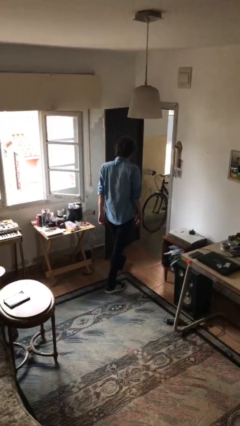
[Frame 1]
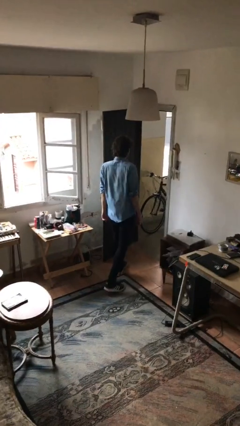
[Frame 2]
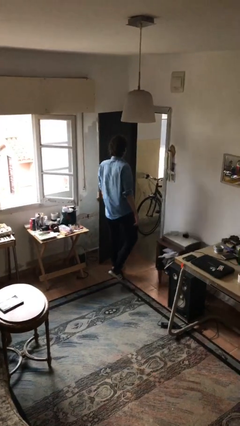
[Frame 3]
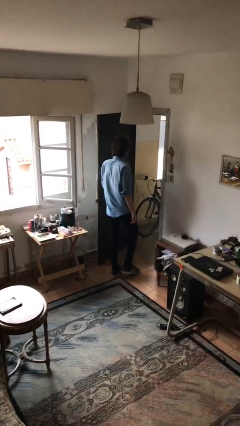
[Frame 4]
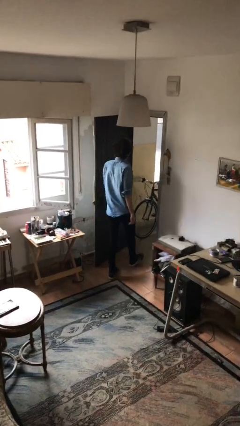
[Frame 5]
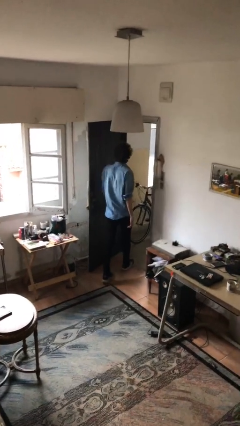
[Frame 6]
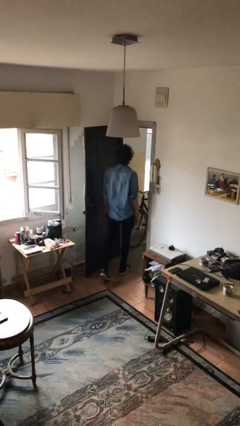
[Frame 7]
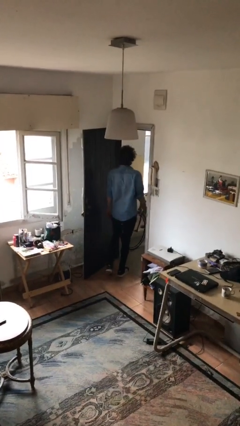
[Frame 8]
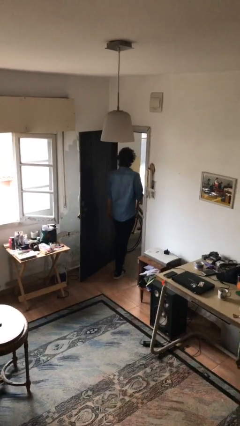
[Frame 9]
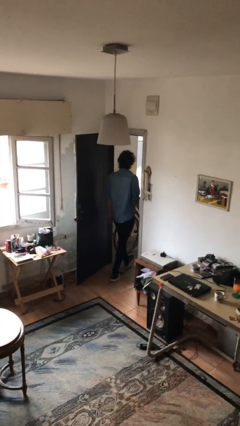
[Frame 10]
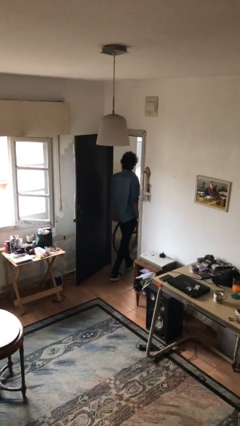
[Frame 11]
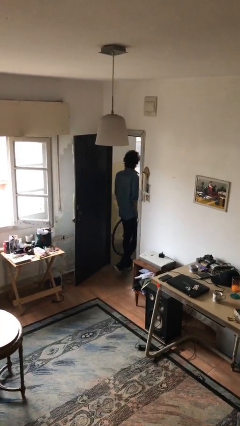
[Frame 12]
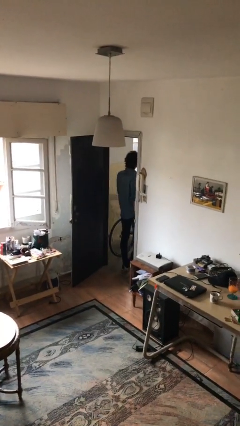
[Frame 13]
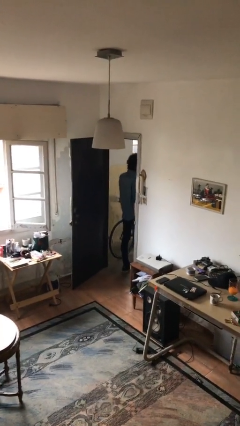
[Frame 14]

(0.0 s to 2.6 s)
person exits scene through structure

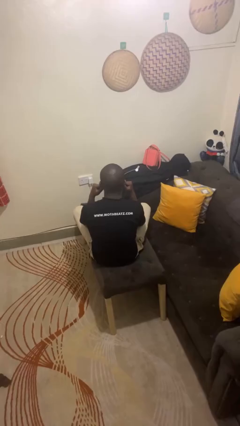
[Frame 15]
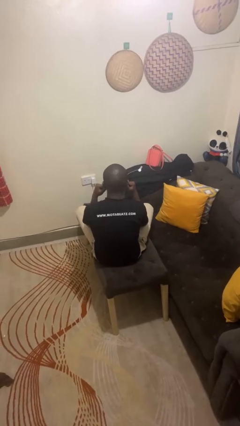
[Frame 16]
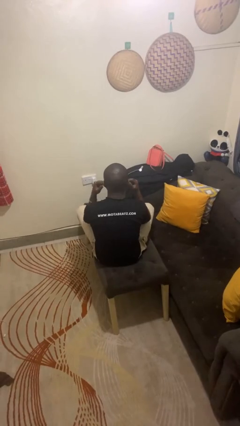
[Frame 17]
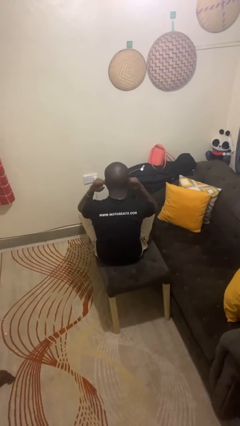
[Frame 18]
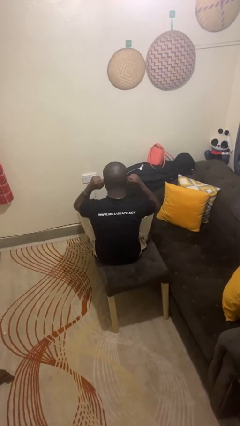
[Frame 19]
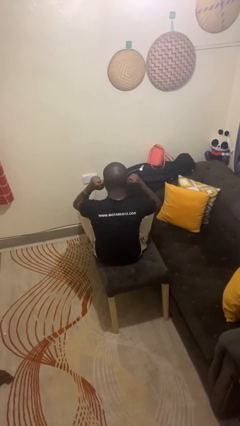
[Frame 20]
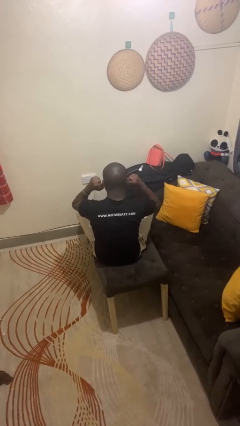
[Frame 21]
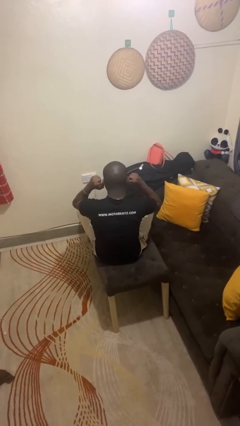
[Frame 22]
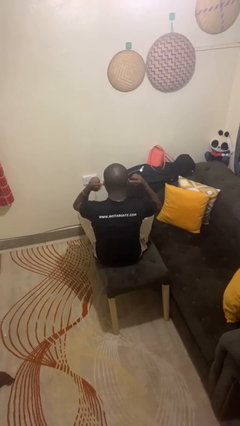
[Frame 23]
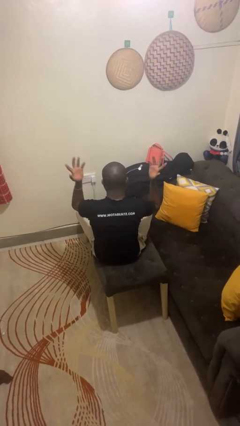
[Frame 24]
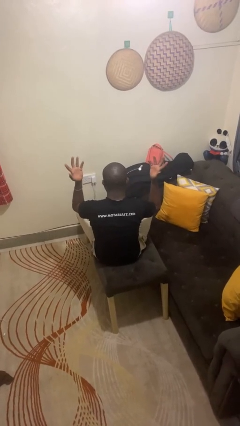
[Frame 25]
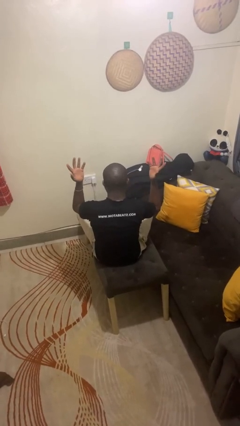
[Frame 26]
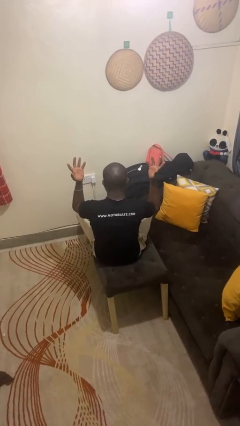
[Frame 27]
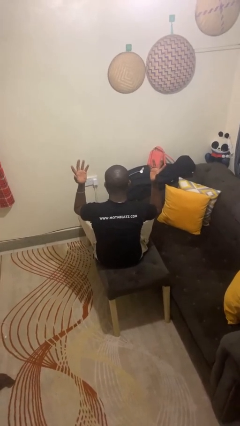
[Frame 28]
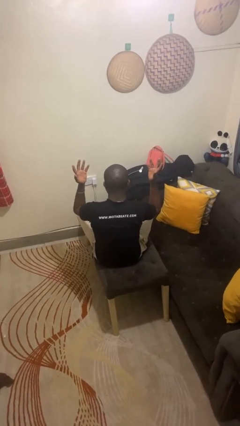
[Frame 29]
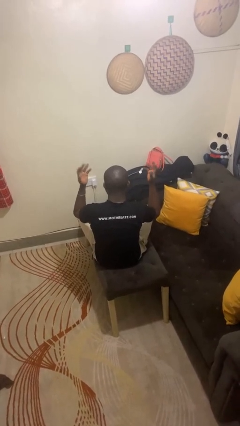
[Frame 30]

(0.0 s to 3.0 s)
person puts fingers in ear

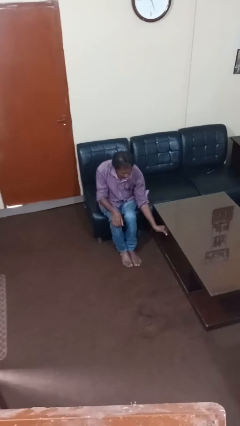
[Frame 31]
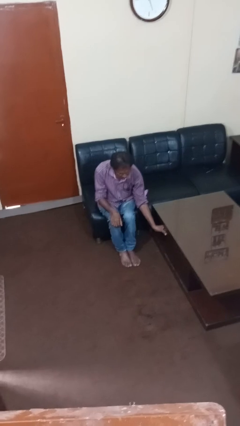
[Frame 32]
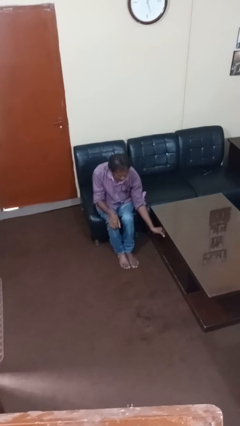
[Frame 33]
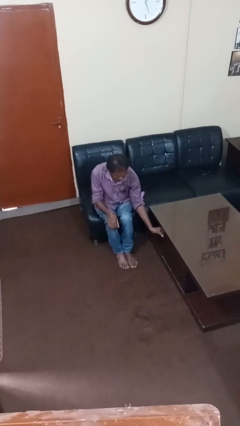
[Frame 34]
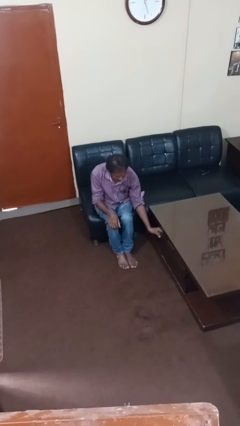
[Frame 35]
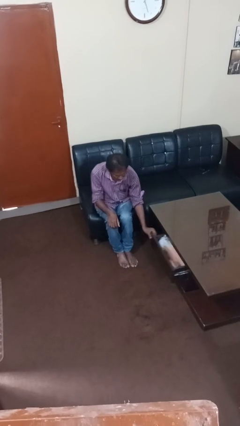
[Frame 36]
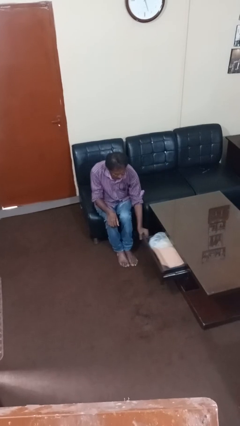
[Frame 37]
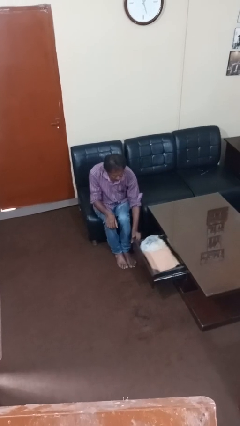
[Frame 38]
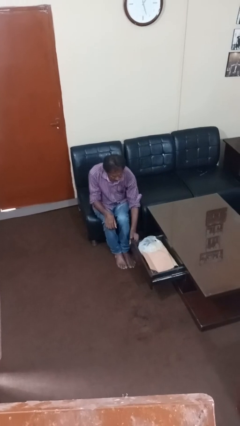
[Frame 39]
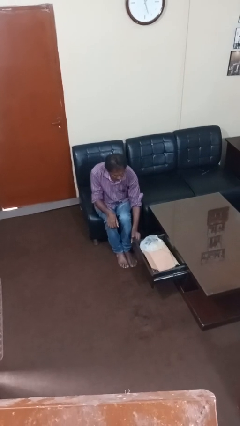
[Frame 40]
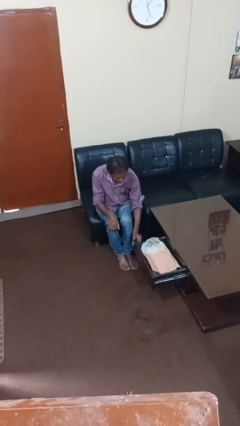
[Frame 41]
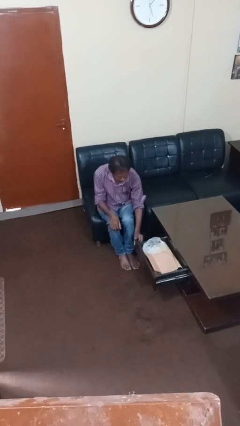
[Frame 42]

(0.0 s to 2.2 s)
person opens dresser drawer

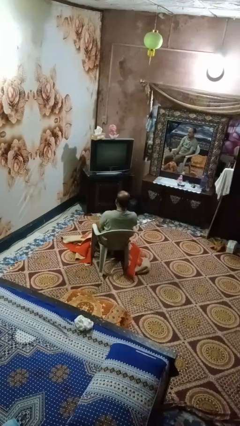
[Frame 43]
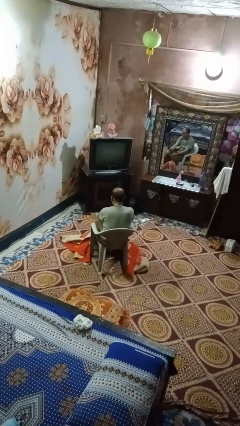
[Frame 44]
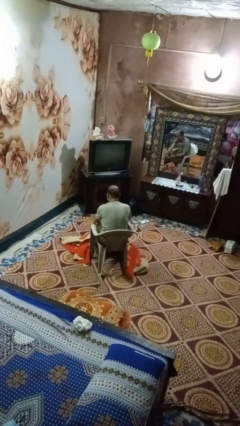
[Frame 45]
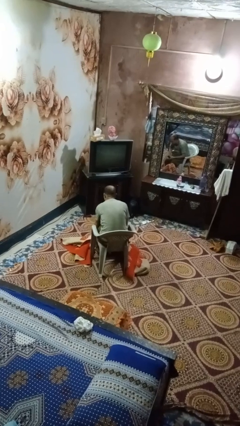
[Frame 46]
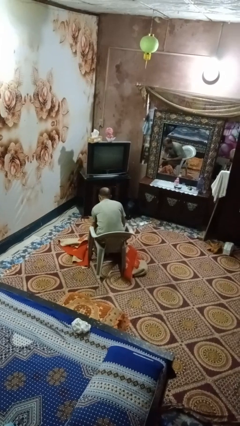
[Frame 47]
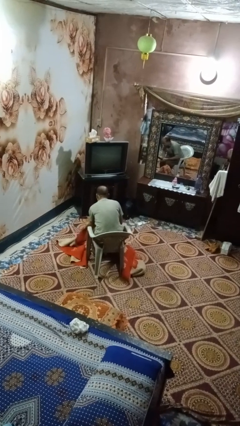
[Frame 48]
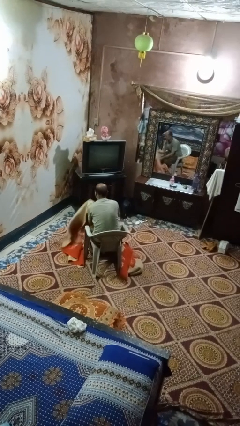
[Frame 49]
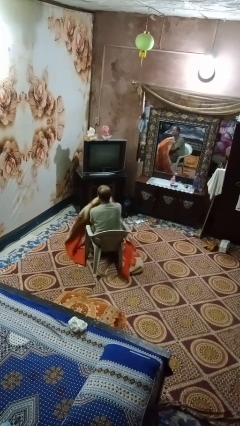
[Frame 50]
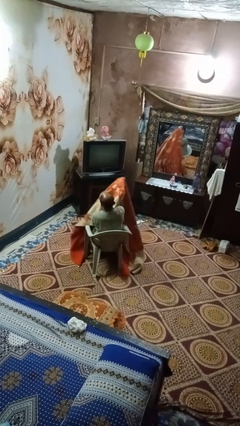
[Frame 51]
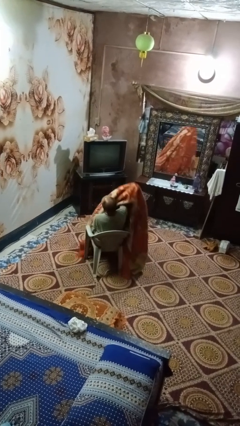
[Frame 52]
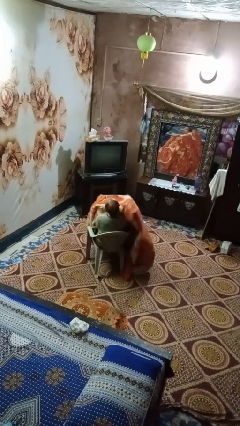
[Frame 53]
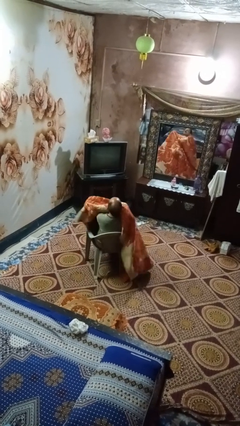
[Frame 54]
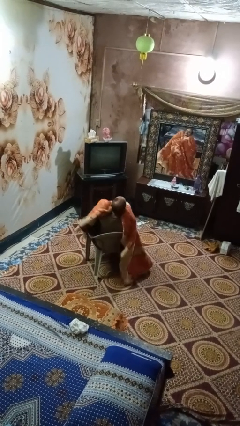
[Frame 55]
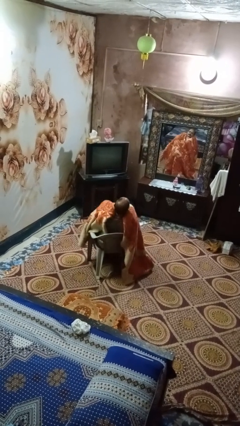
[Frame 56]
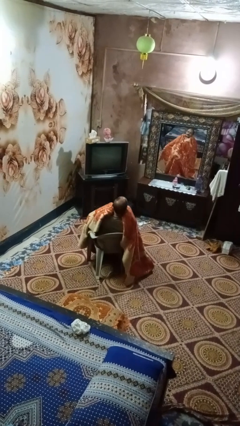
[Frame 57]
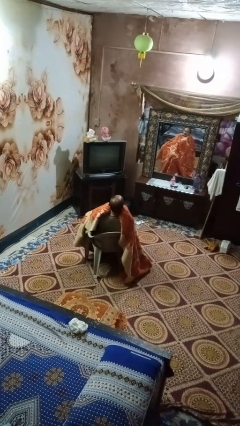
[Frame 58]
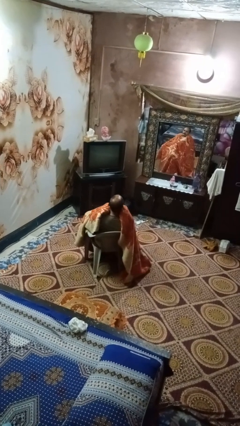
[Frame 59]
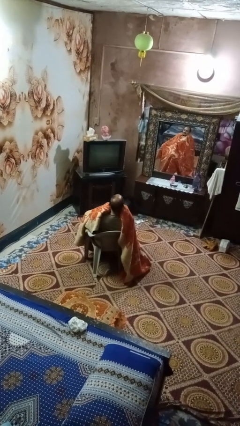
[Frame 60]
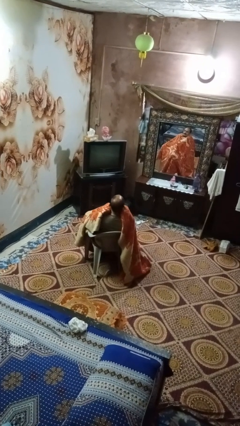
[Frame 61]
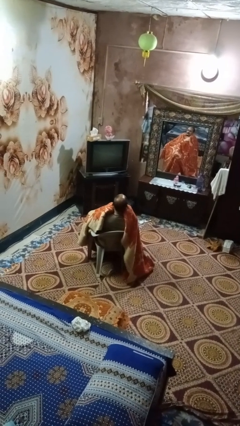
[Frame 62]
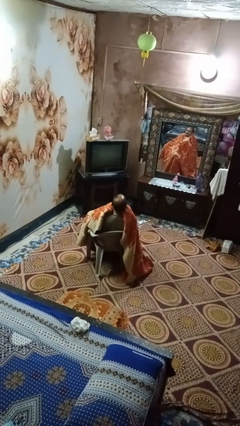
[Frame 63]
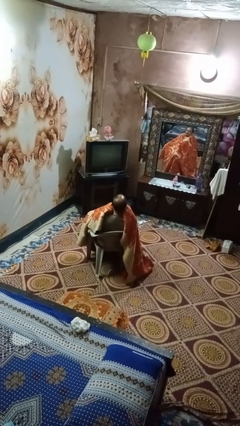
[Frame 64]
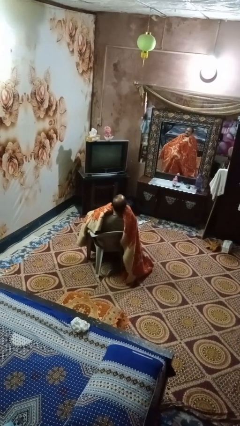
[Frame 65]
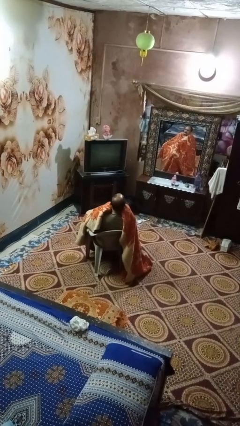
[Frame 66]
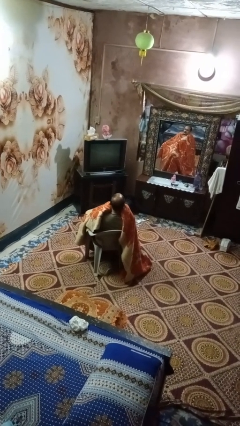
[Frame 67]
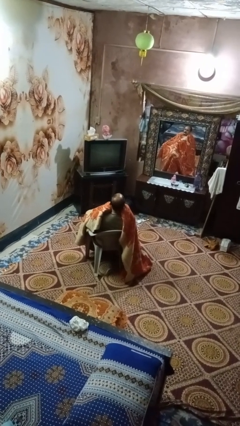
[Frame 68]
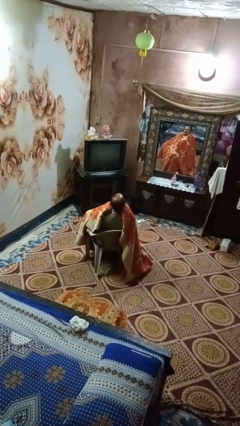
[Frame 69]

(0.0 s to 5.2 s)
person covers with blanket

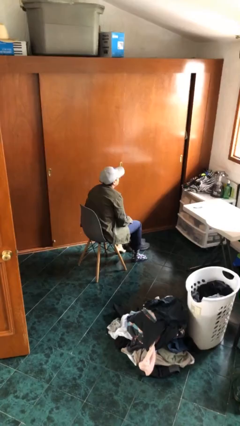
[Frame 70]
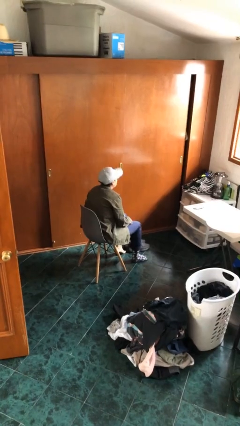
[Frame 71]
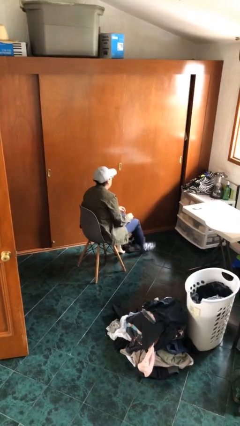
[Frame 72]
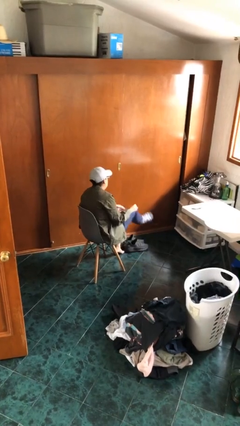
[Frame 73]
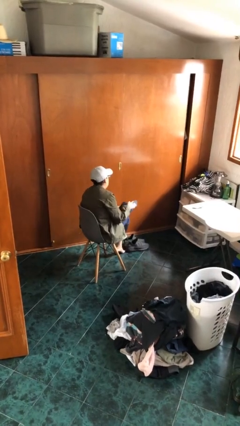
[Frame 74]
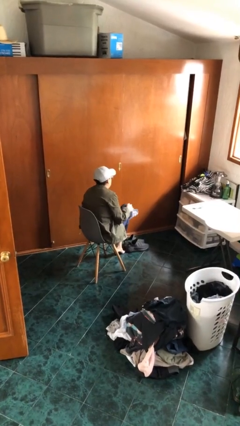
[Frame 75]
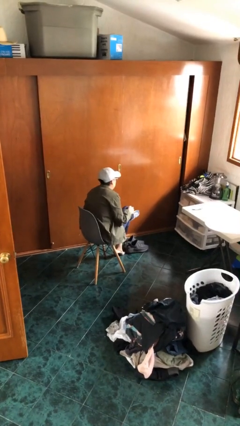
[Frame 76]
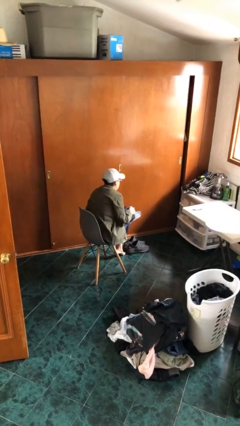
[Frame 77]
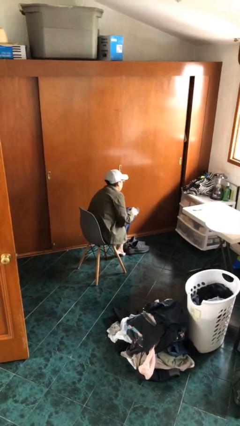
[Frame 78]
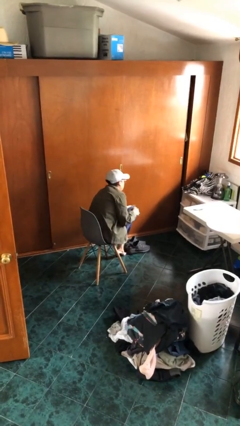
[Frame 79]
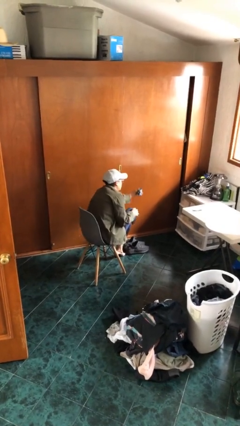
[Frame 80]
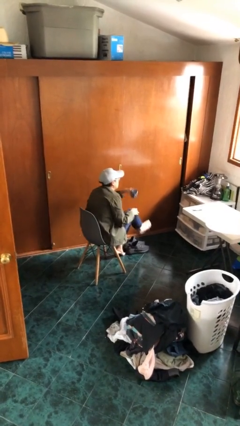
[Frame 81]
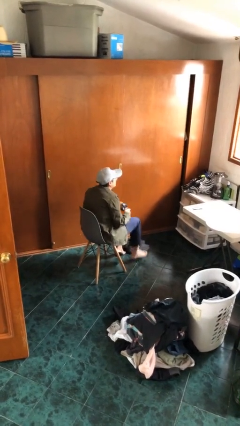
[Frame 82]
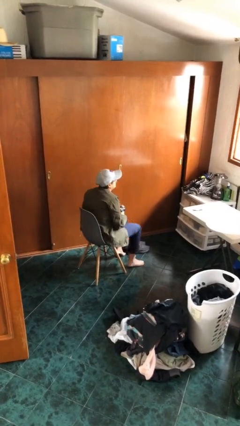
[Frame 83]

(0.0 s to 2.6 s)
person takes off socks

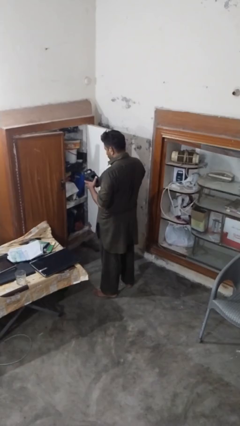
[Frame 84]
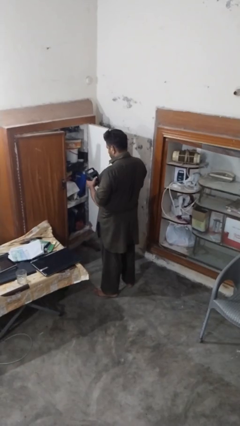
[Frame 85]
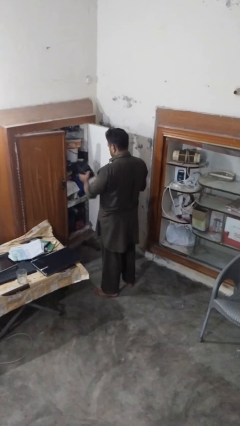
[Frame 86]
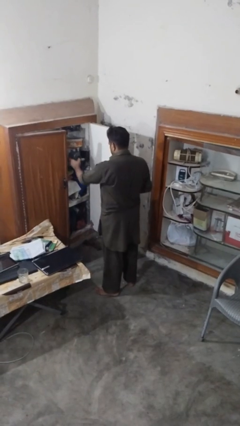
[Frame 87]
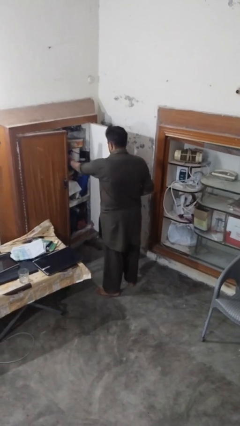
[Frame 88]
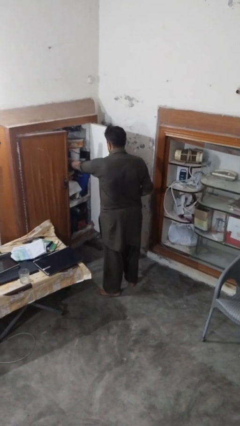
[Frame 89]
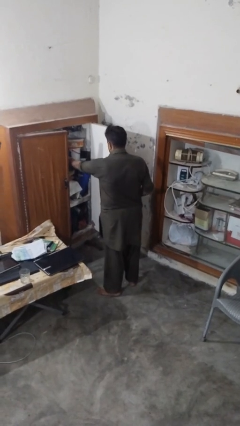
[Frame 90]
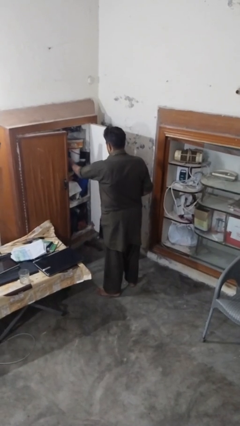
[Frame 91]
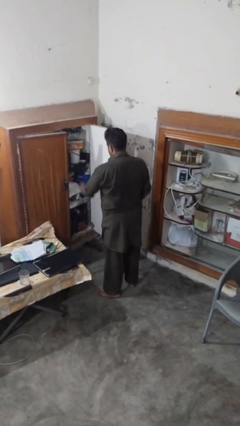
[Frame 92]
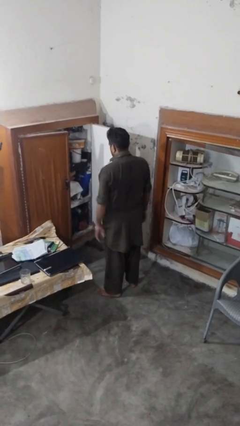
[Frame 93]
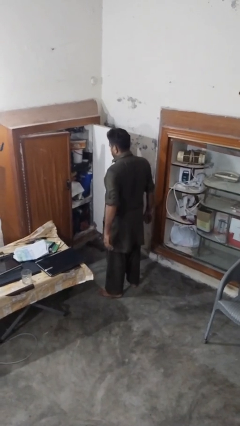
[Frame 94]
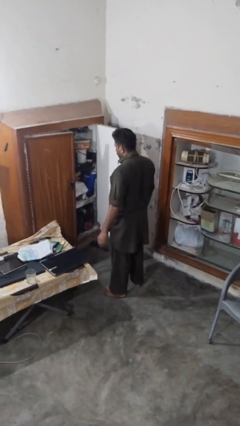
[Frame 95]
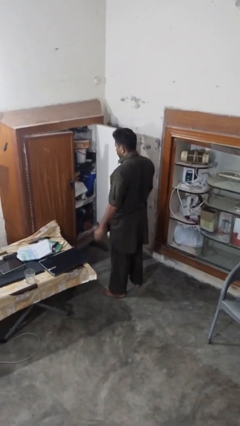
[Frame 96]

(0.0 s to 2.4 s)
person puts down object into cabinet
